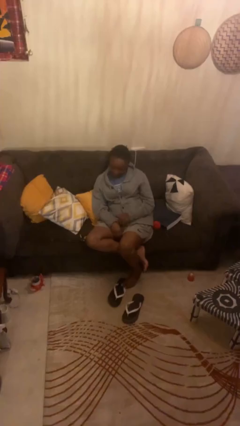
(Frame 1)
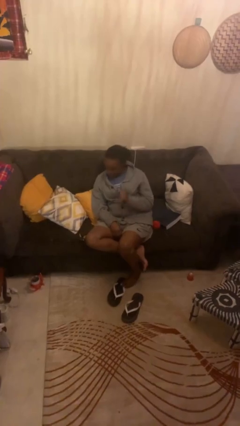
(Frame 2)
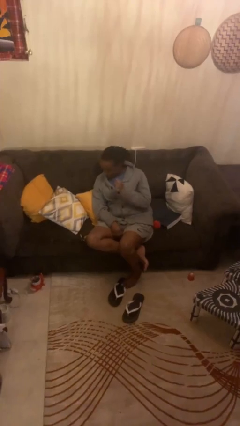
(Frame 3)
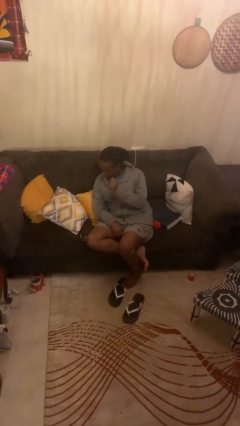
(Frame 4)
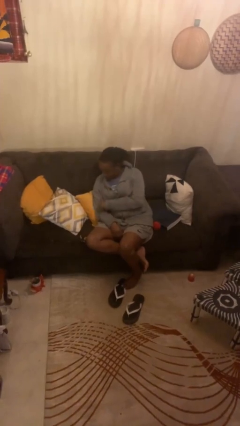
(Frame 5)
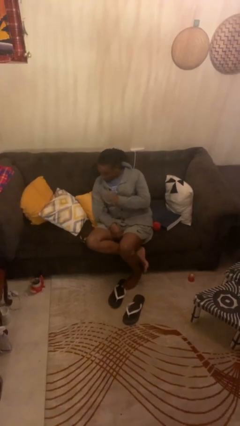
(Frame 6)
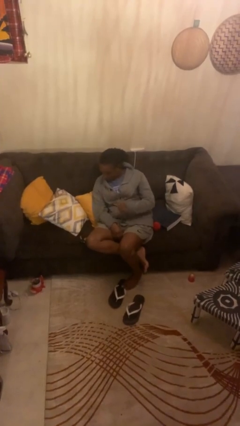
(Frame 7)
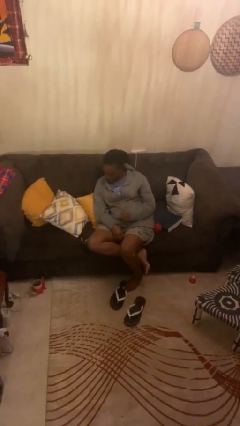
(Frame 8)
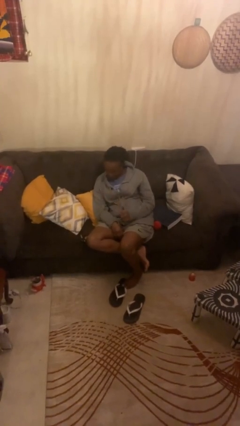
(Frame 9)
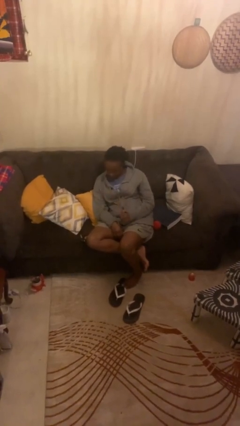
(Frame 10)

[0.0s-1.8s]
person swats bug

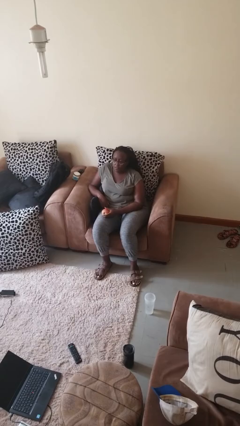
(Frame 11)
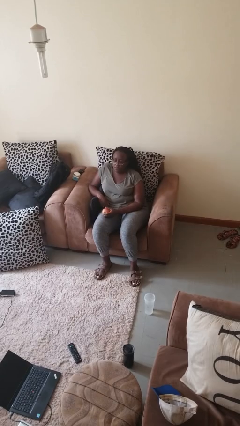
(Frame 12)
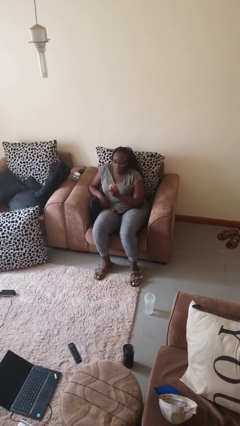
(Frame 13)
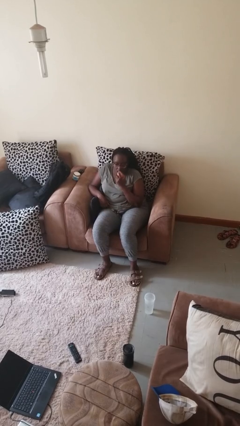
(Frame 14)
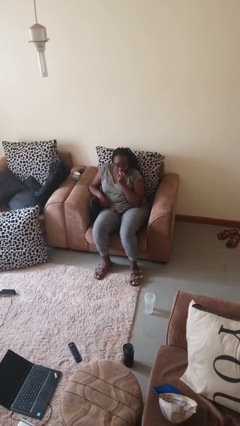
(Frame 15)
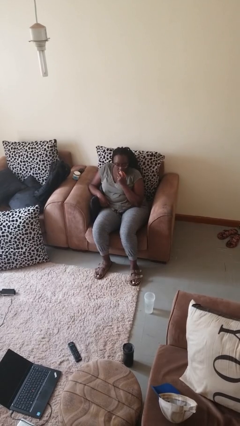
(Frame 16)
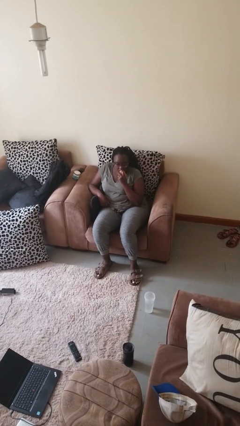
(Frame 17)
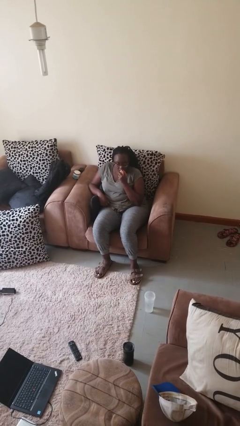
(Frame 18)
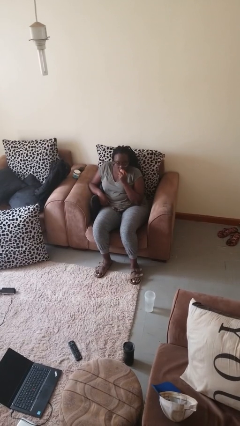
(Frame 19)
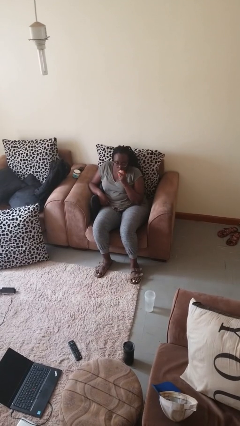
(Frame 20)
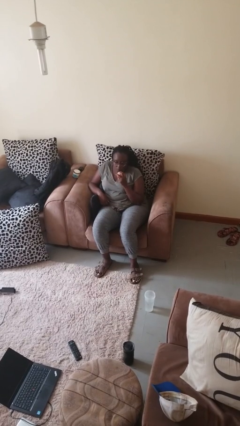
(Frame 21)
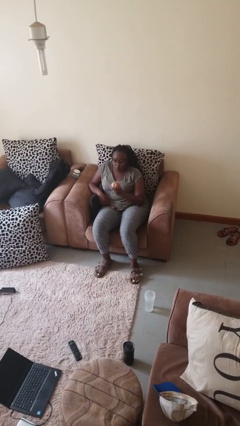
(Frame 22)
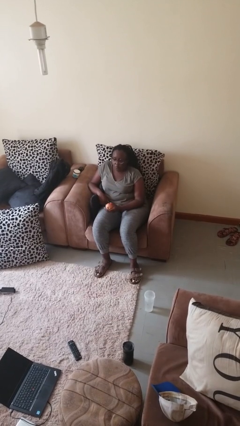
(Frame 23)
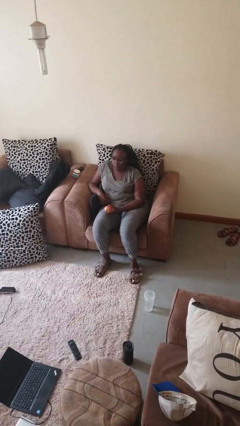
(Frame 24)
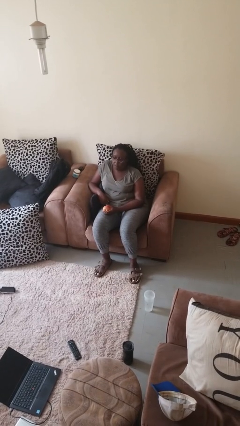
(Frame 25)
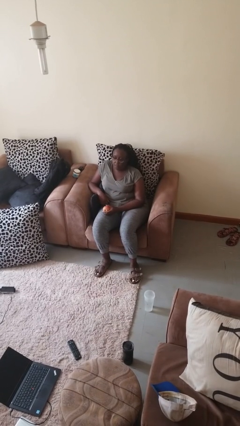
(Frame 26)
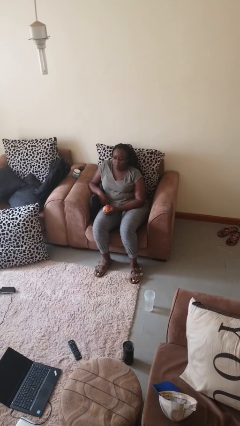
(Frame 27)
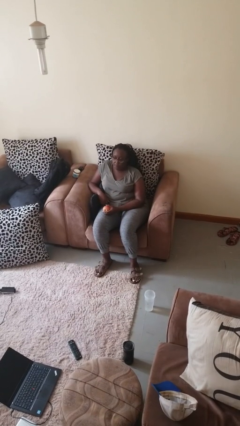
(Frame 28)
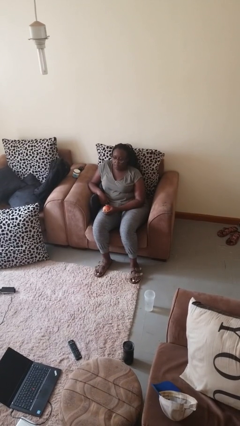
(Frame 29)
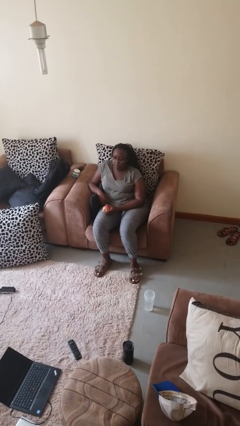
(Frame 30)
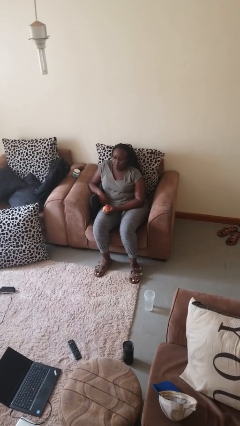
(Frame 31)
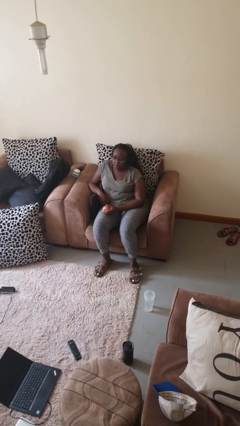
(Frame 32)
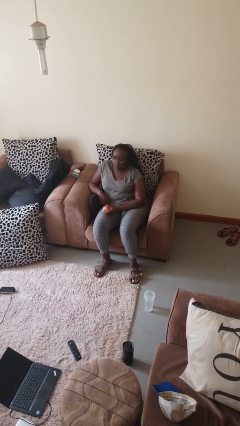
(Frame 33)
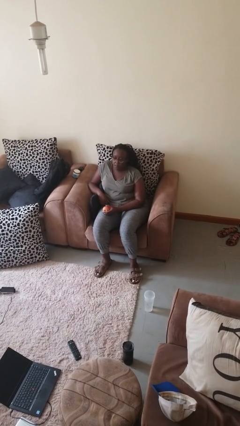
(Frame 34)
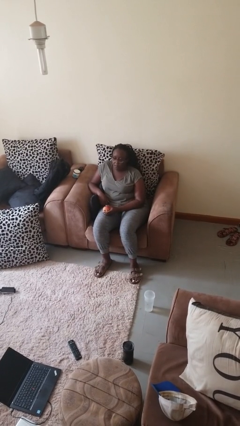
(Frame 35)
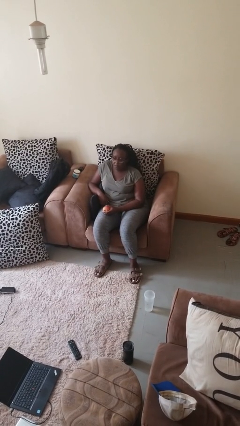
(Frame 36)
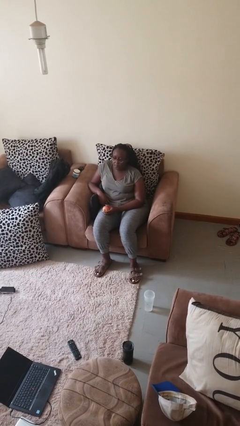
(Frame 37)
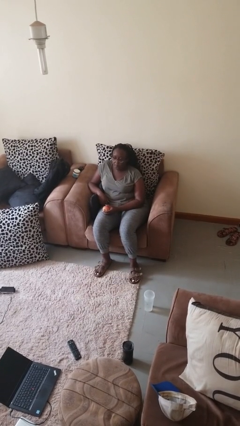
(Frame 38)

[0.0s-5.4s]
person eats apple

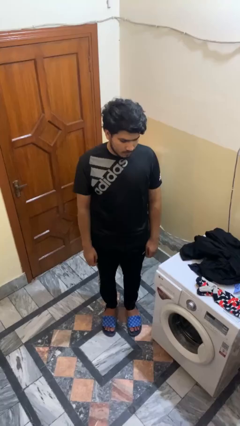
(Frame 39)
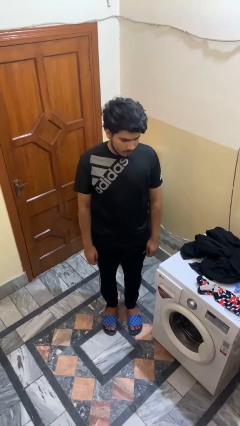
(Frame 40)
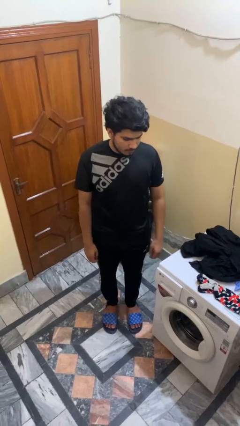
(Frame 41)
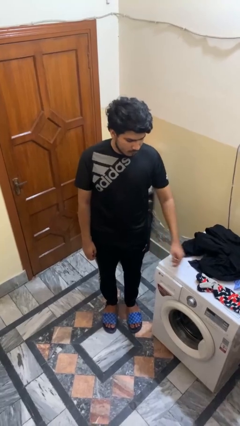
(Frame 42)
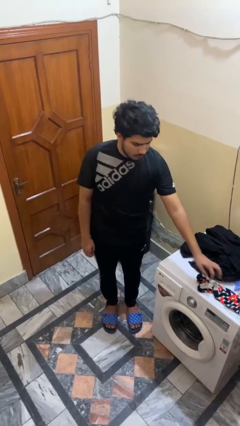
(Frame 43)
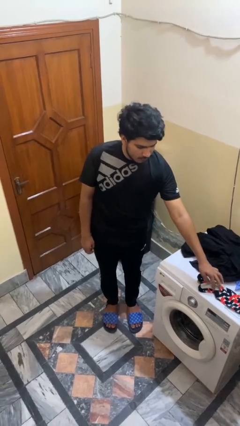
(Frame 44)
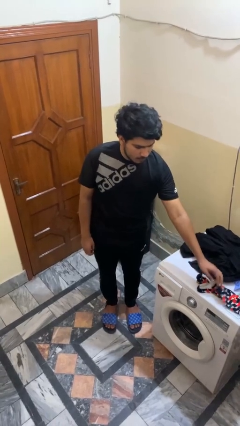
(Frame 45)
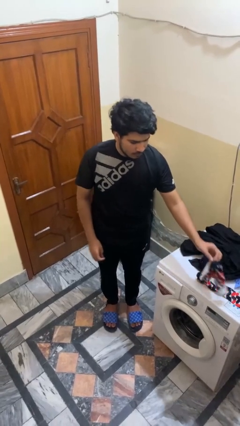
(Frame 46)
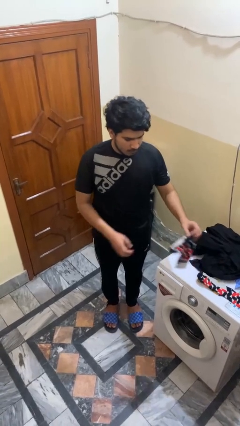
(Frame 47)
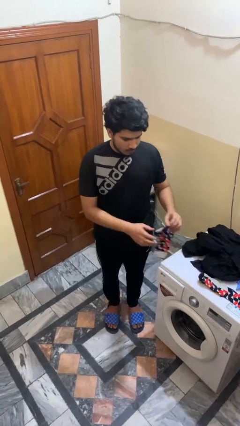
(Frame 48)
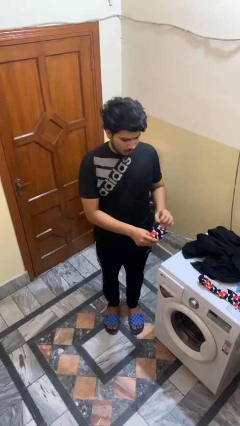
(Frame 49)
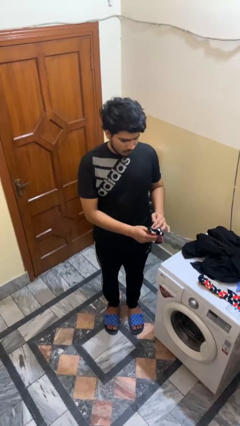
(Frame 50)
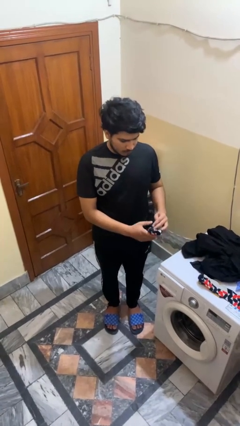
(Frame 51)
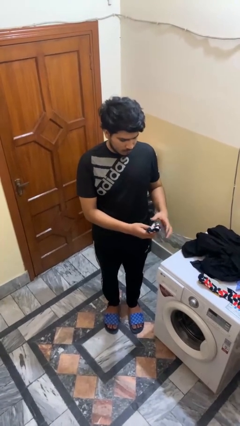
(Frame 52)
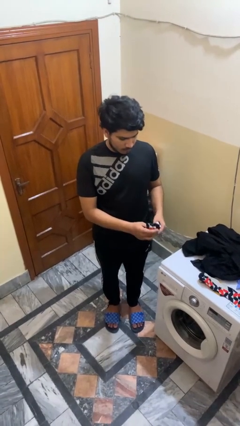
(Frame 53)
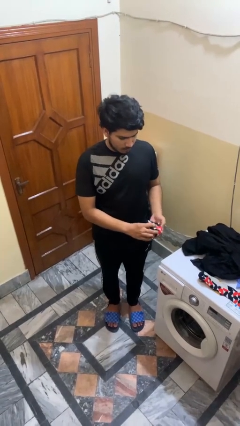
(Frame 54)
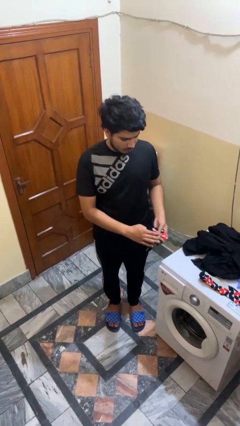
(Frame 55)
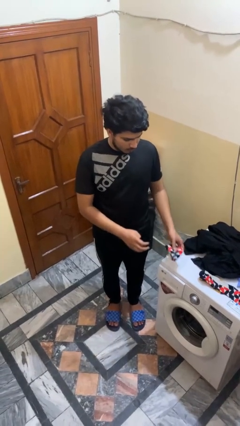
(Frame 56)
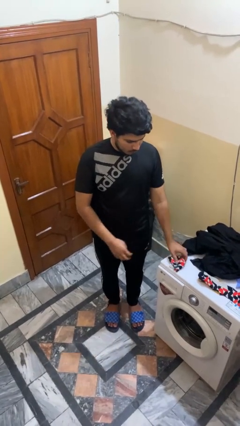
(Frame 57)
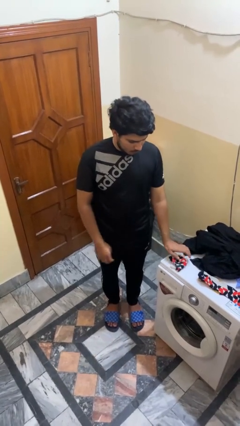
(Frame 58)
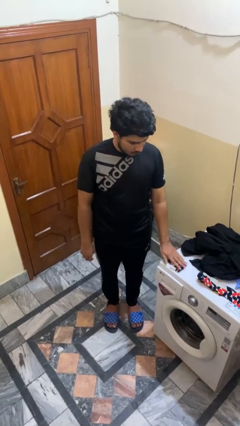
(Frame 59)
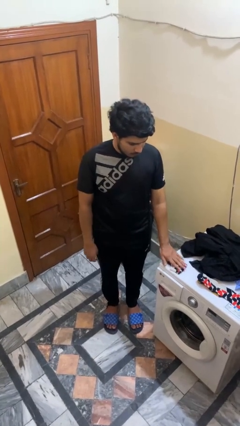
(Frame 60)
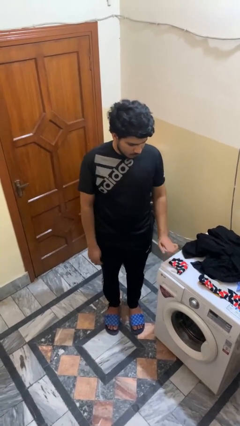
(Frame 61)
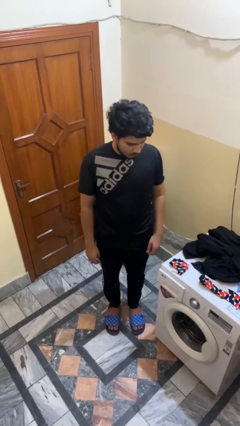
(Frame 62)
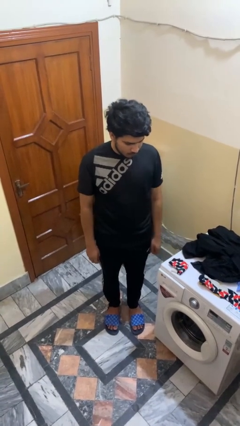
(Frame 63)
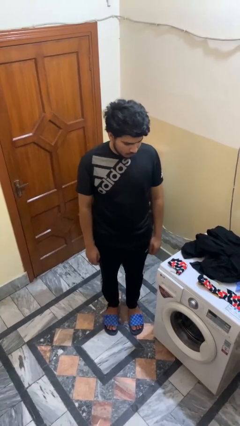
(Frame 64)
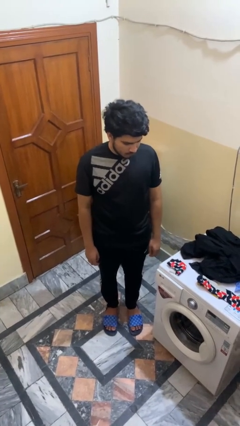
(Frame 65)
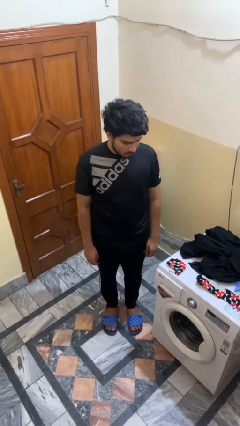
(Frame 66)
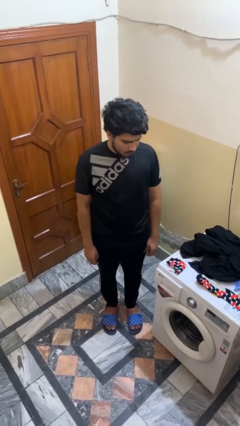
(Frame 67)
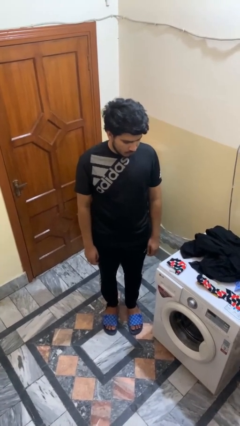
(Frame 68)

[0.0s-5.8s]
person folds socks

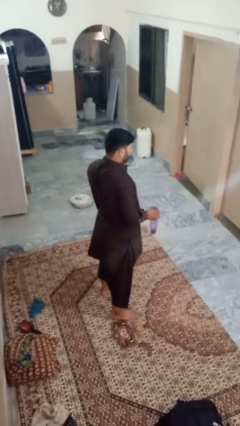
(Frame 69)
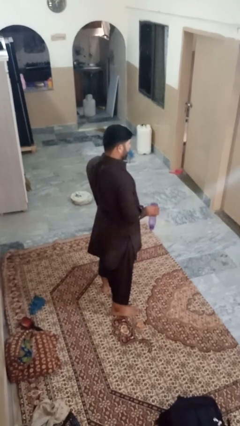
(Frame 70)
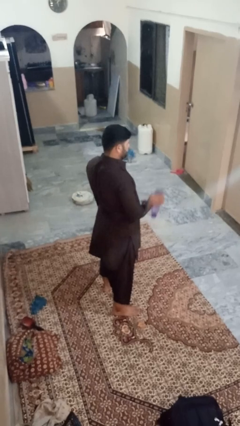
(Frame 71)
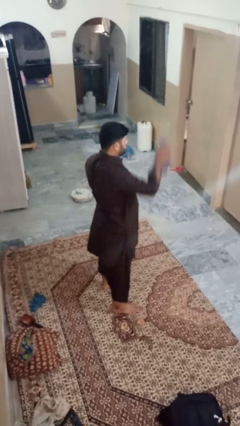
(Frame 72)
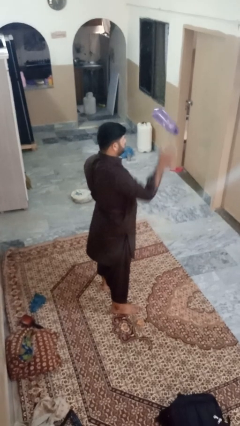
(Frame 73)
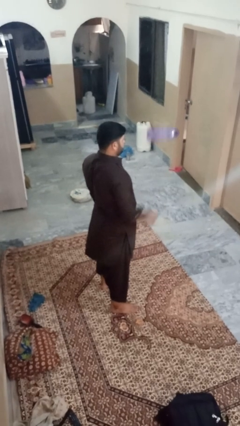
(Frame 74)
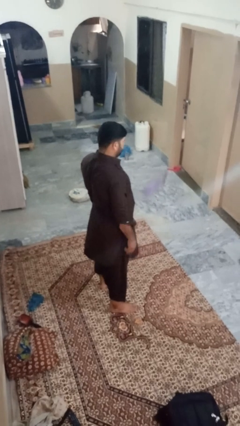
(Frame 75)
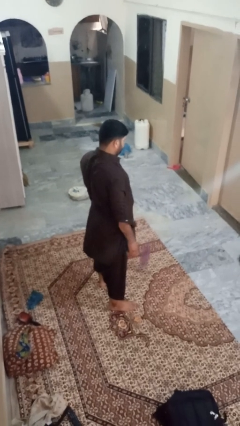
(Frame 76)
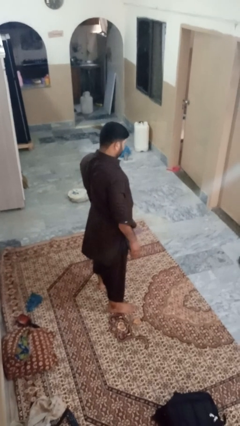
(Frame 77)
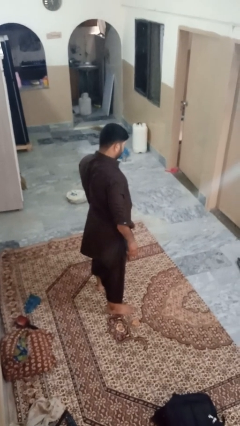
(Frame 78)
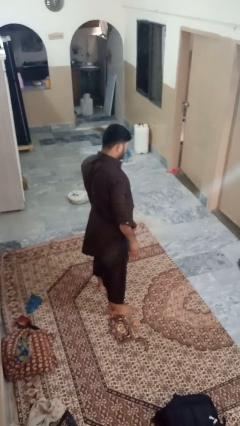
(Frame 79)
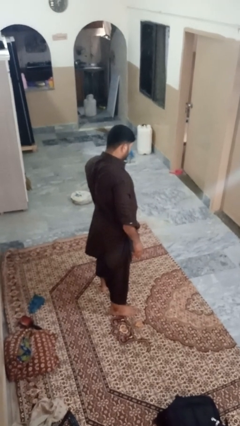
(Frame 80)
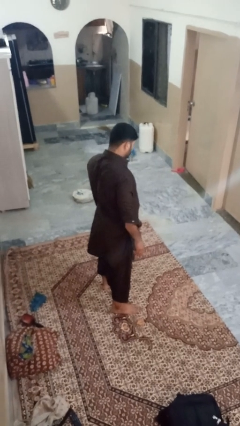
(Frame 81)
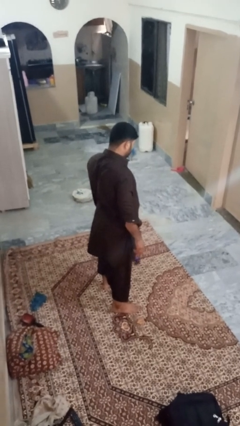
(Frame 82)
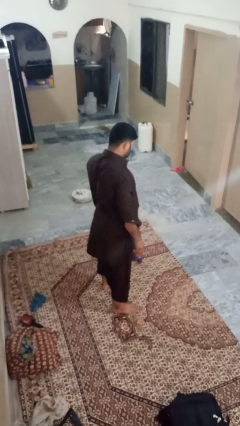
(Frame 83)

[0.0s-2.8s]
person throws object into air

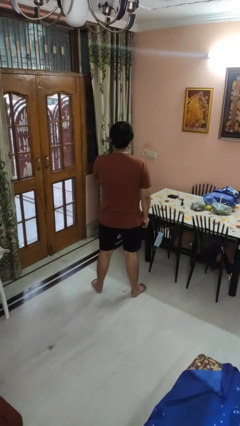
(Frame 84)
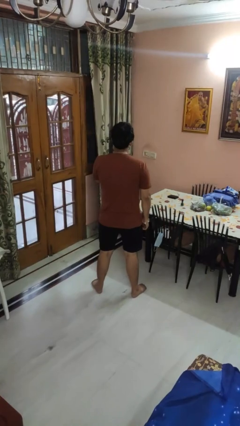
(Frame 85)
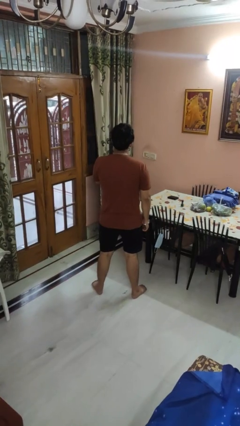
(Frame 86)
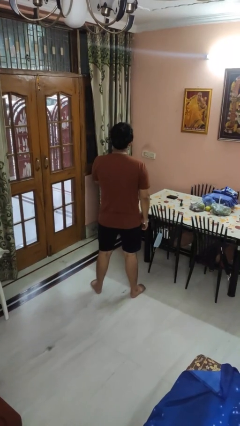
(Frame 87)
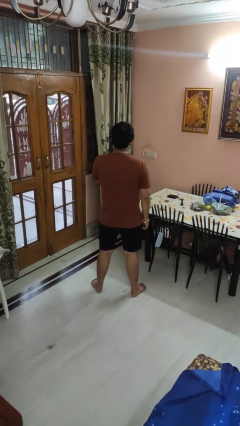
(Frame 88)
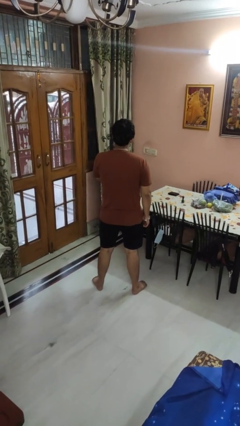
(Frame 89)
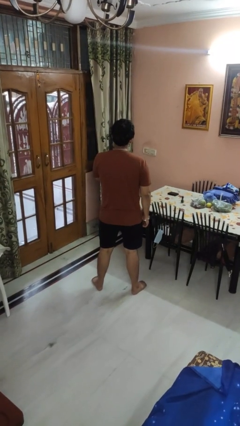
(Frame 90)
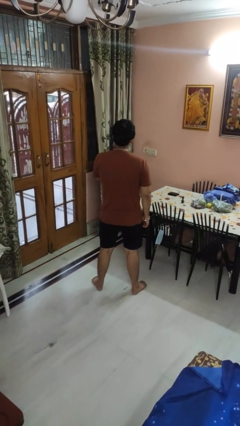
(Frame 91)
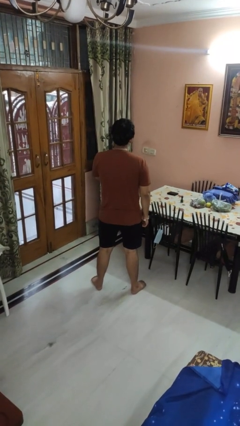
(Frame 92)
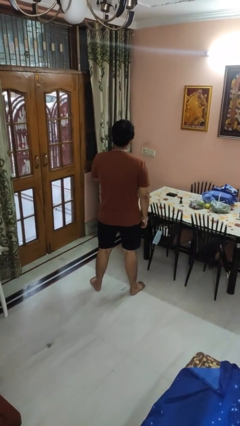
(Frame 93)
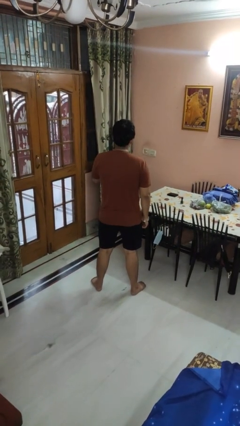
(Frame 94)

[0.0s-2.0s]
person strokes chin
